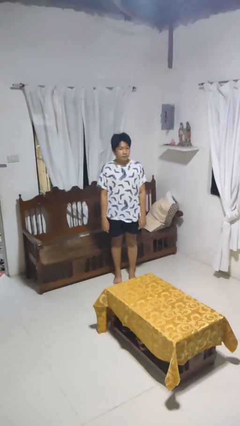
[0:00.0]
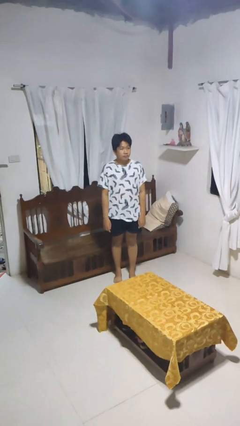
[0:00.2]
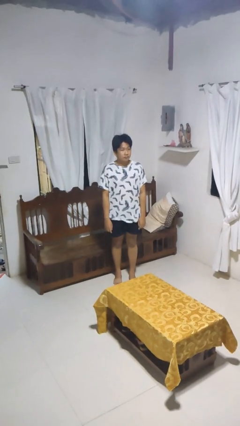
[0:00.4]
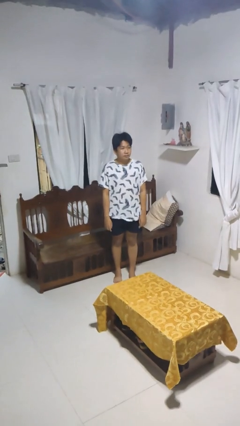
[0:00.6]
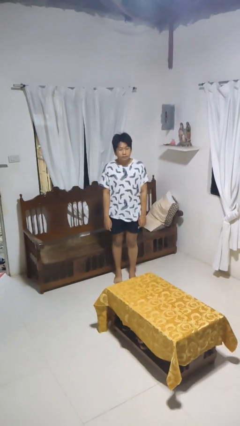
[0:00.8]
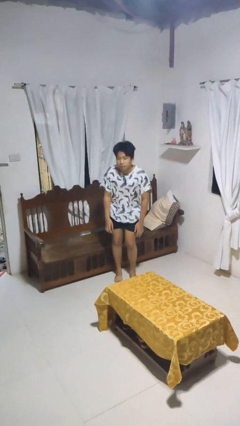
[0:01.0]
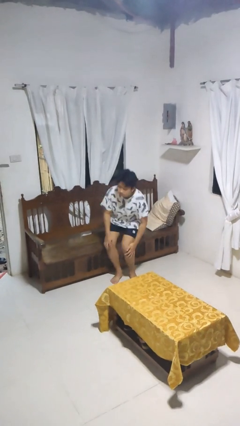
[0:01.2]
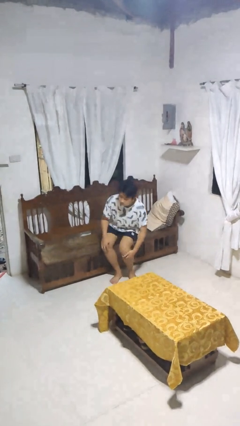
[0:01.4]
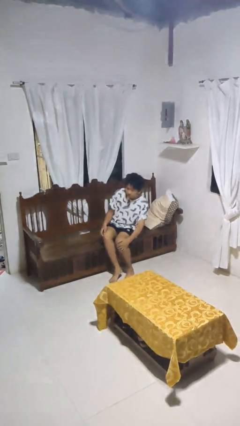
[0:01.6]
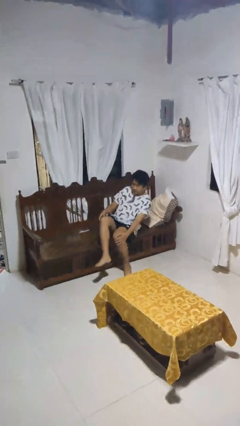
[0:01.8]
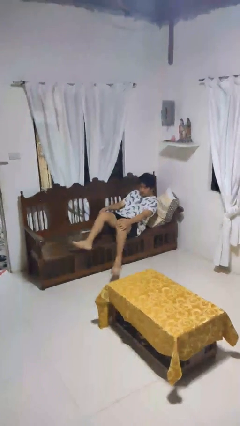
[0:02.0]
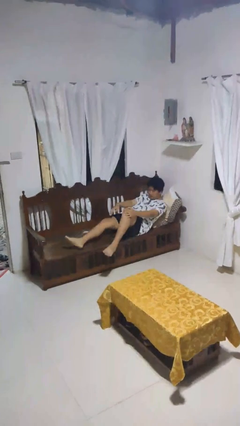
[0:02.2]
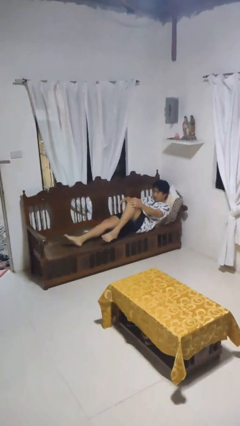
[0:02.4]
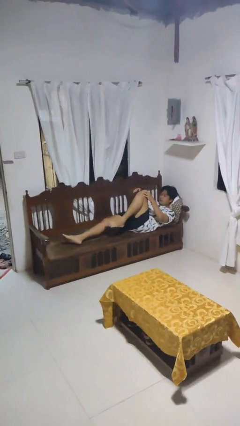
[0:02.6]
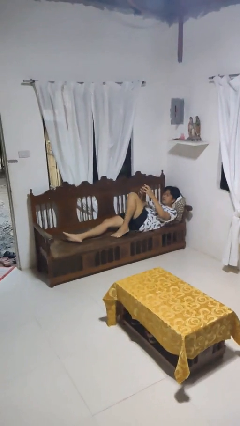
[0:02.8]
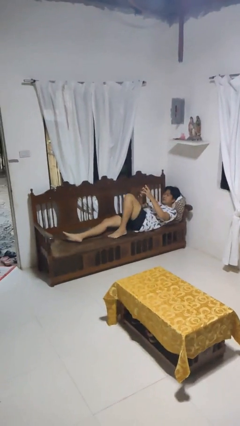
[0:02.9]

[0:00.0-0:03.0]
person lies down on couch

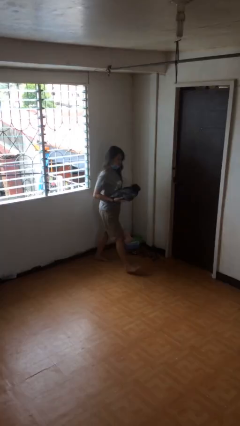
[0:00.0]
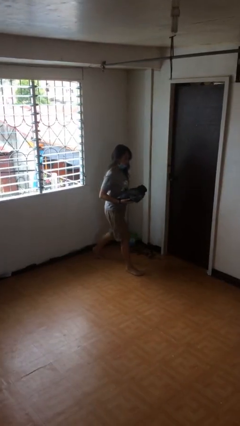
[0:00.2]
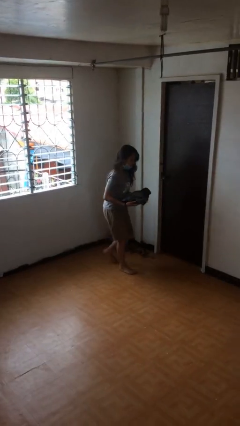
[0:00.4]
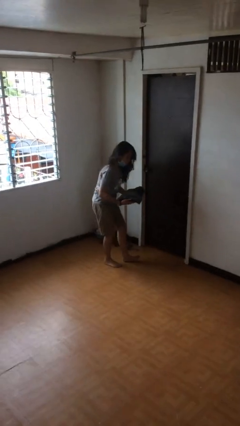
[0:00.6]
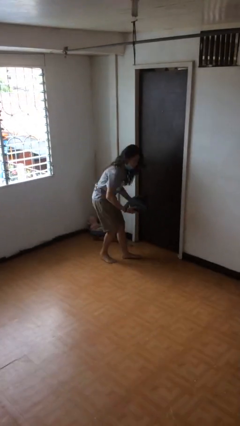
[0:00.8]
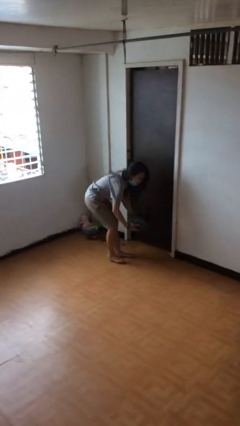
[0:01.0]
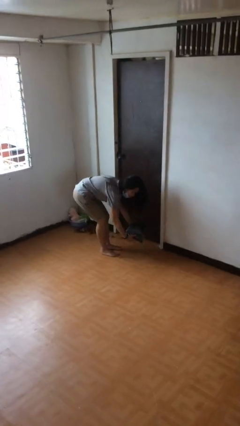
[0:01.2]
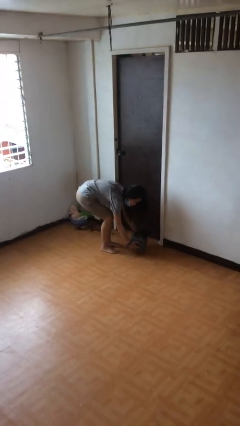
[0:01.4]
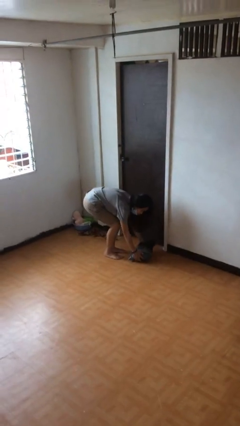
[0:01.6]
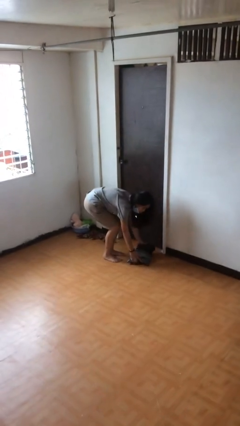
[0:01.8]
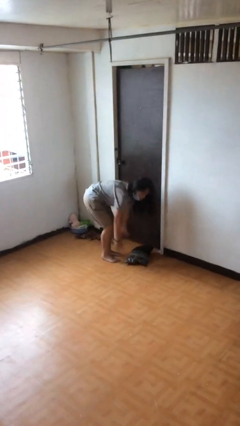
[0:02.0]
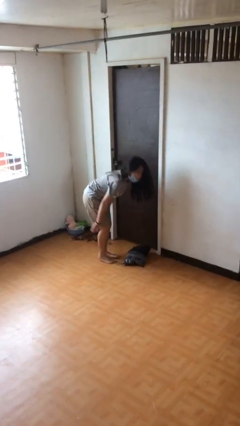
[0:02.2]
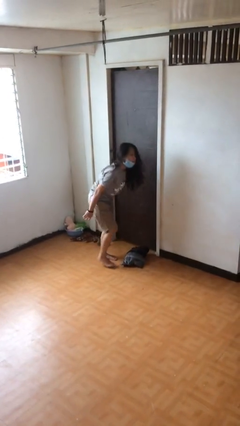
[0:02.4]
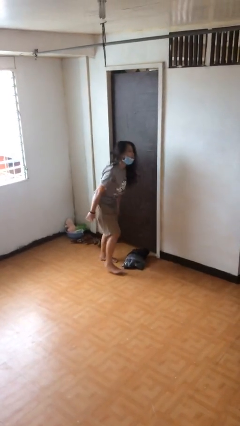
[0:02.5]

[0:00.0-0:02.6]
person puts down object on floor

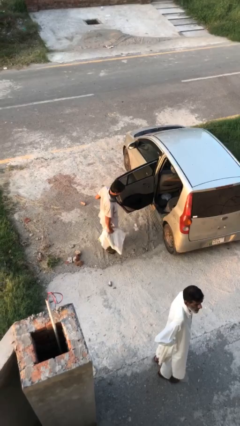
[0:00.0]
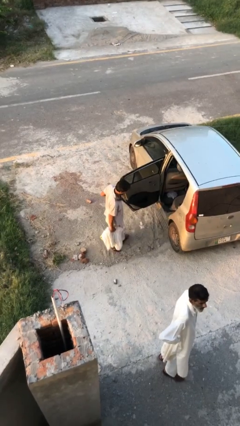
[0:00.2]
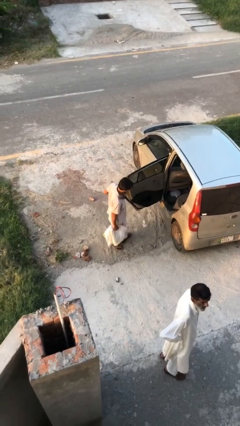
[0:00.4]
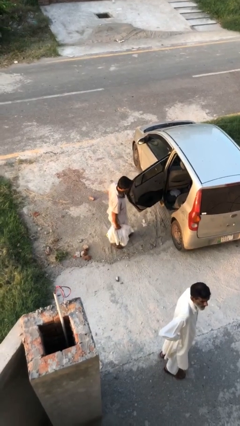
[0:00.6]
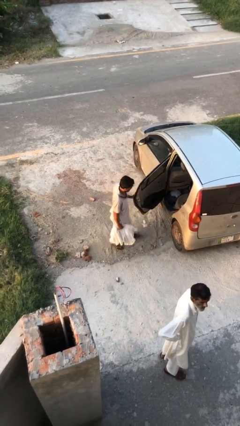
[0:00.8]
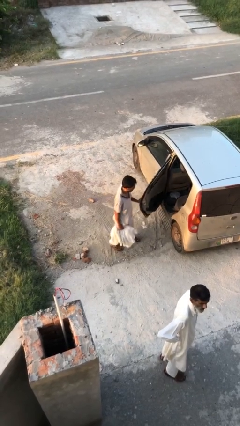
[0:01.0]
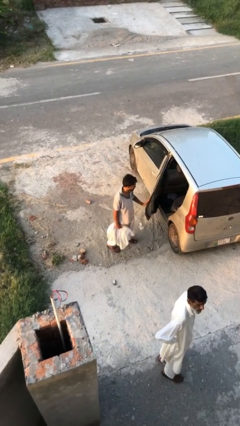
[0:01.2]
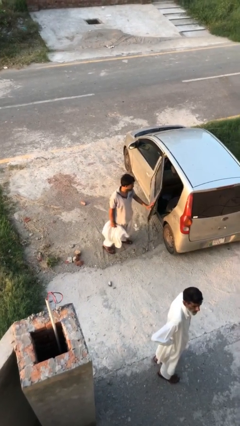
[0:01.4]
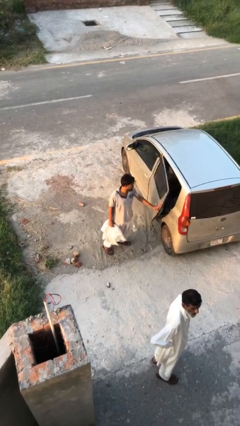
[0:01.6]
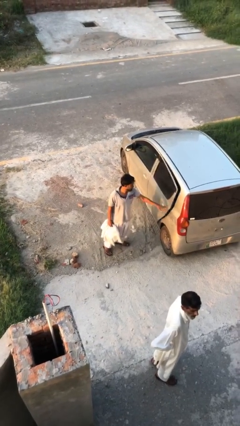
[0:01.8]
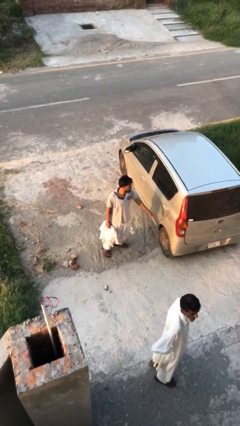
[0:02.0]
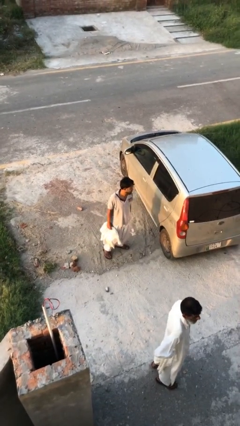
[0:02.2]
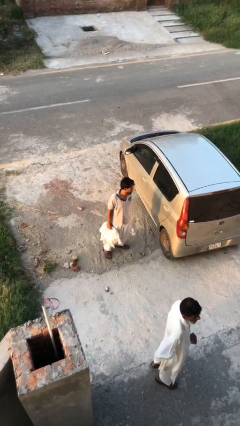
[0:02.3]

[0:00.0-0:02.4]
person closes car door

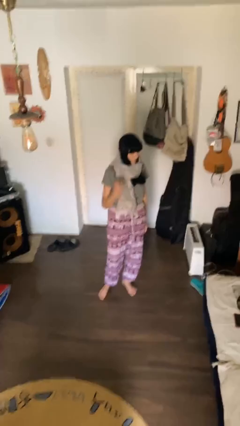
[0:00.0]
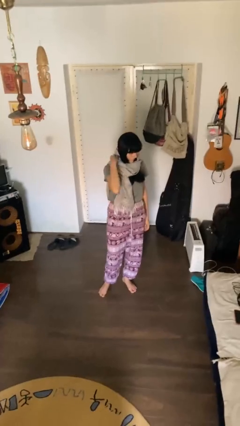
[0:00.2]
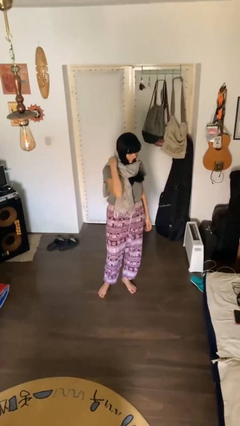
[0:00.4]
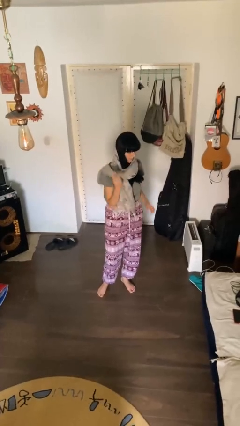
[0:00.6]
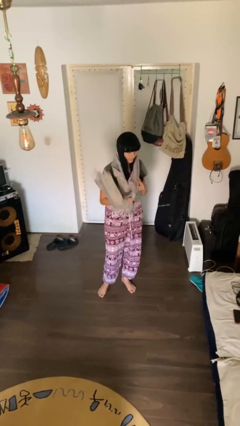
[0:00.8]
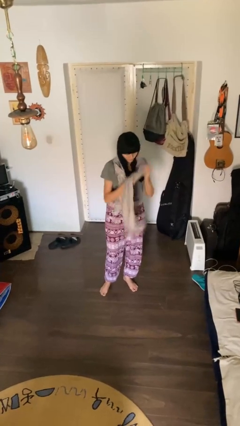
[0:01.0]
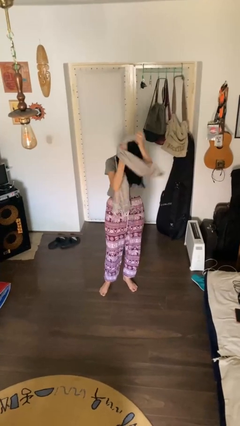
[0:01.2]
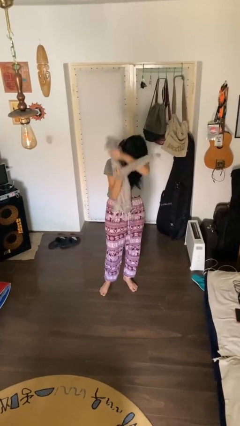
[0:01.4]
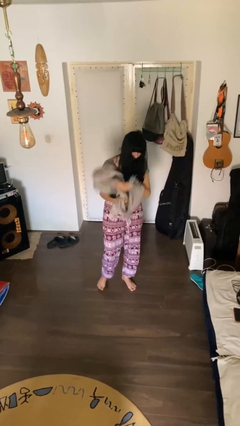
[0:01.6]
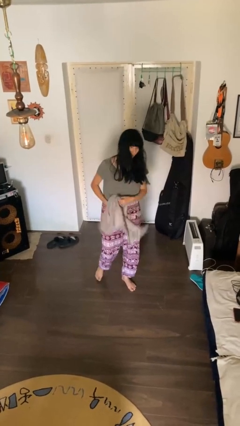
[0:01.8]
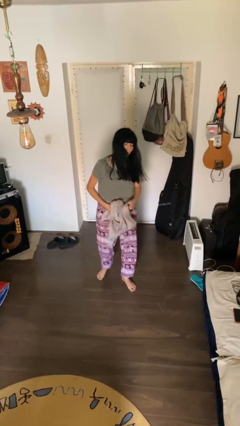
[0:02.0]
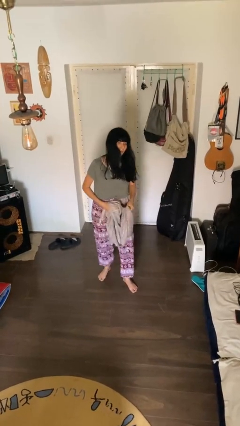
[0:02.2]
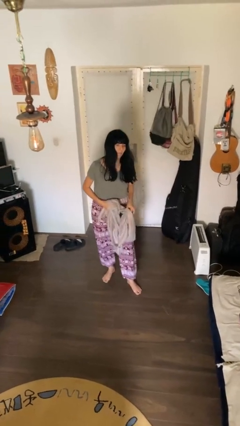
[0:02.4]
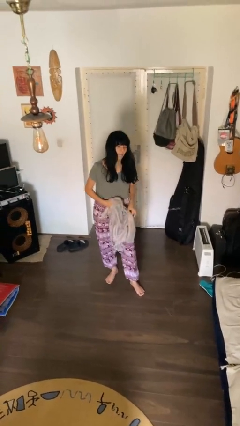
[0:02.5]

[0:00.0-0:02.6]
person takes off scarf

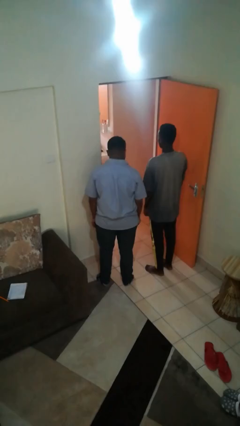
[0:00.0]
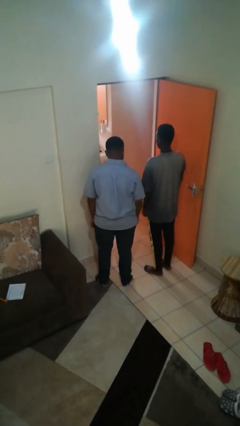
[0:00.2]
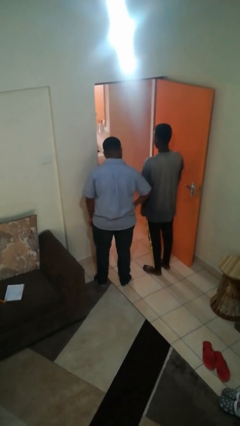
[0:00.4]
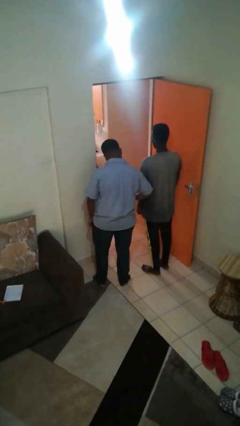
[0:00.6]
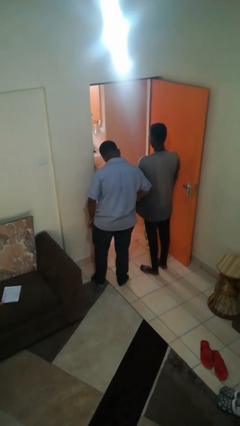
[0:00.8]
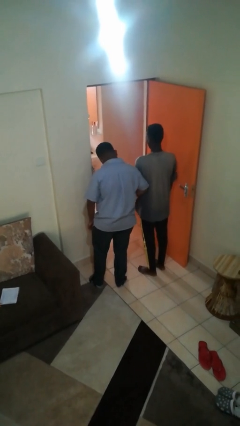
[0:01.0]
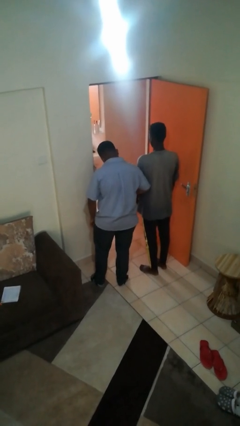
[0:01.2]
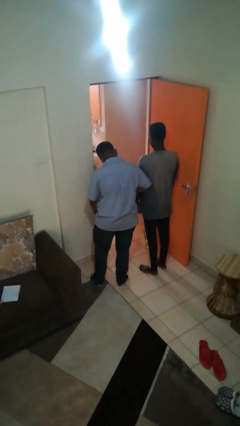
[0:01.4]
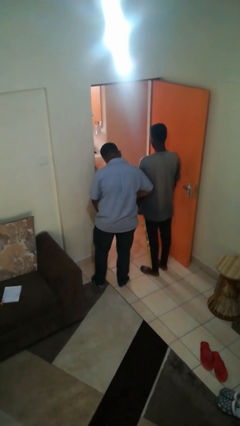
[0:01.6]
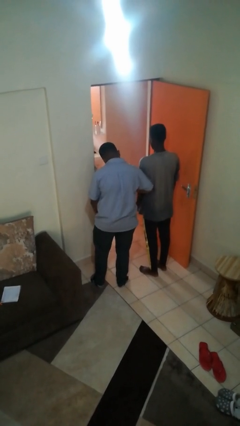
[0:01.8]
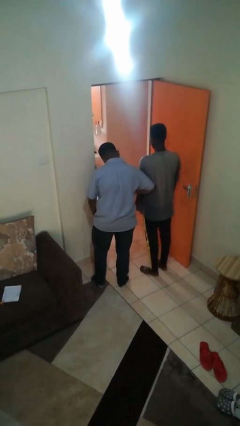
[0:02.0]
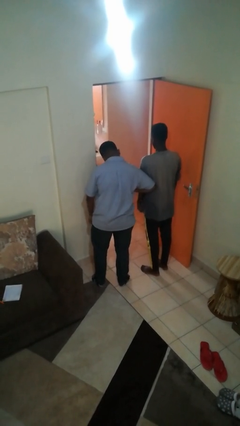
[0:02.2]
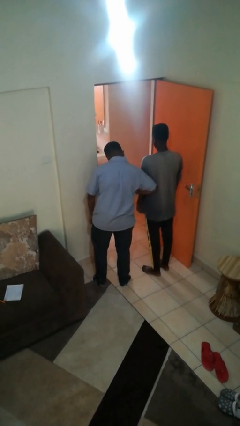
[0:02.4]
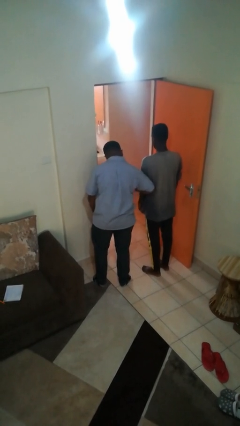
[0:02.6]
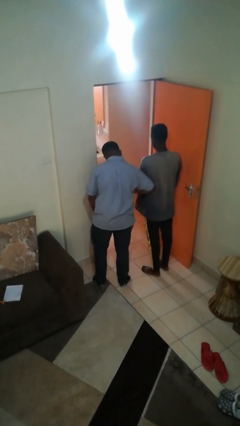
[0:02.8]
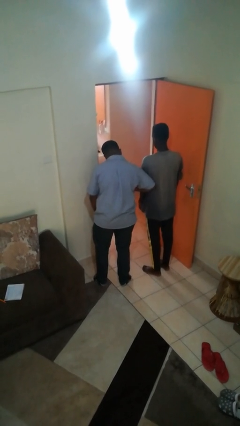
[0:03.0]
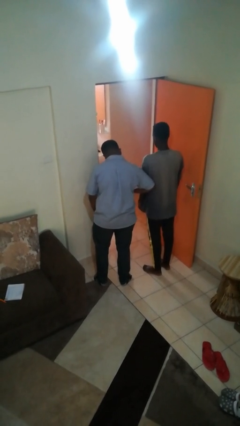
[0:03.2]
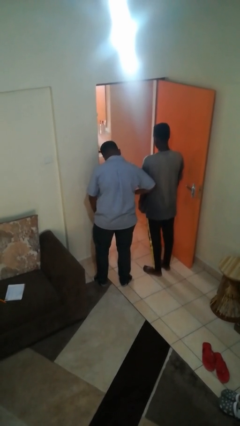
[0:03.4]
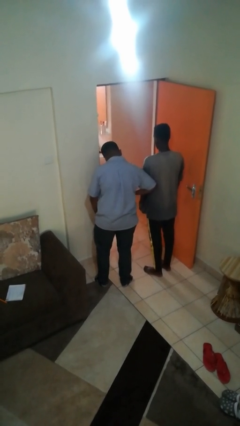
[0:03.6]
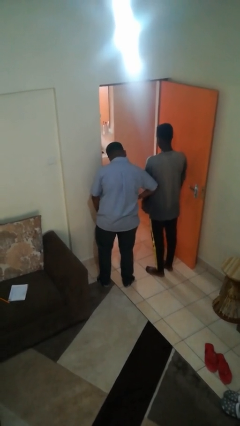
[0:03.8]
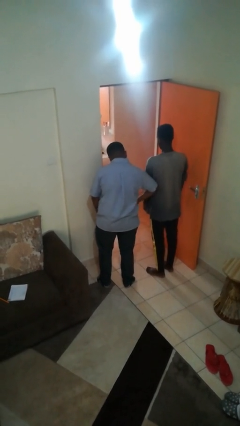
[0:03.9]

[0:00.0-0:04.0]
person nudges person with elbow

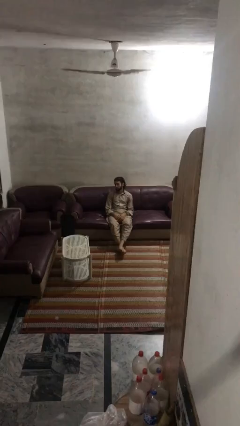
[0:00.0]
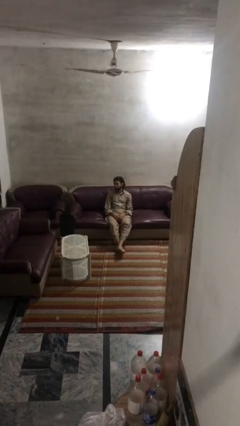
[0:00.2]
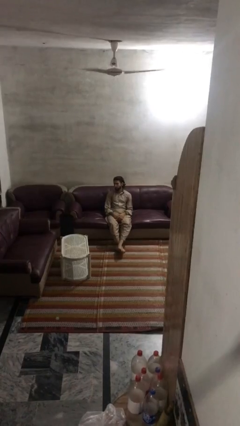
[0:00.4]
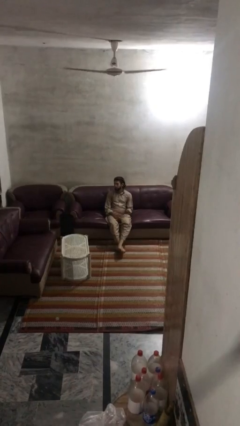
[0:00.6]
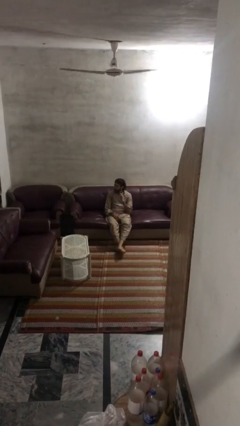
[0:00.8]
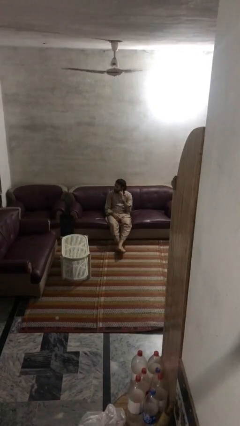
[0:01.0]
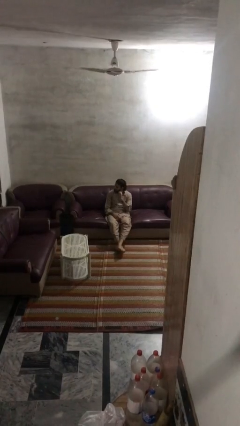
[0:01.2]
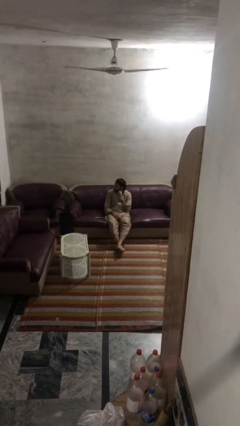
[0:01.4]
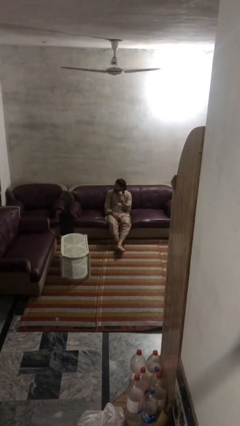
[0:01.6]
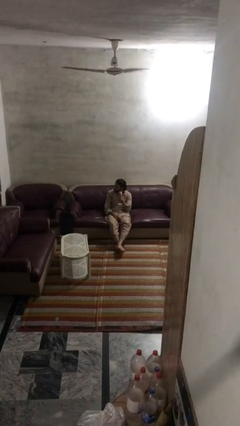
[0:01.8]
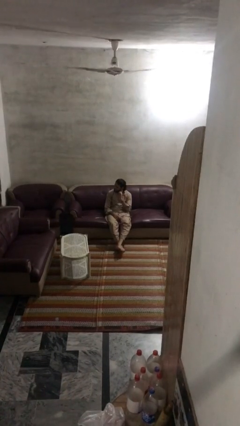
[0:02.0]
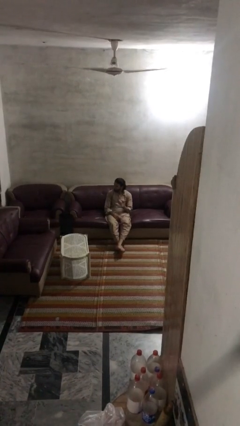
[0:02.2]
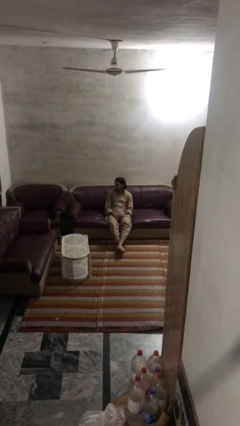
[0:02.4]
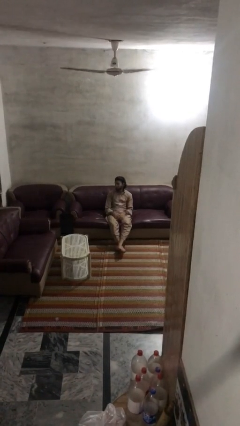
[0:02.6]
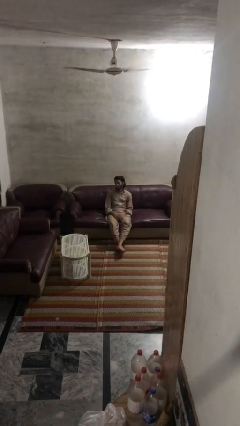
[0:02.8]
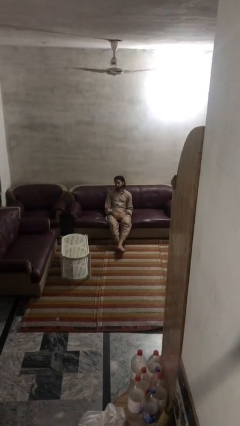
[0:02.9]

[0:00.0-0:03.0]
person gestures listen closely
